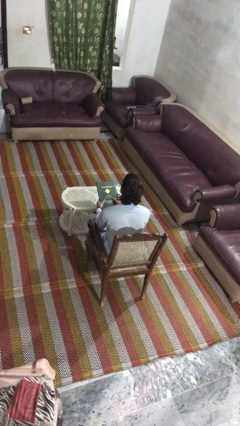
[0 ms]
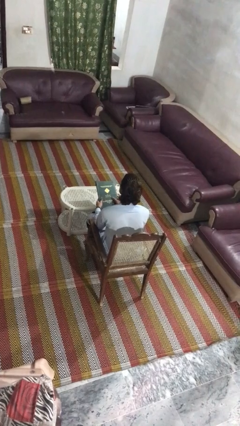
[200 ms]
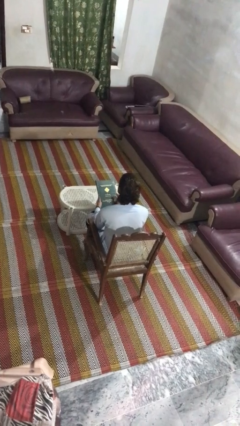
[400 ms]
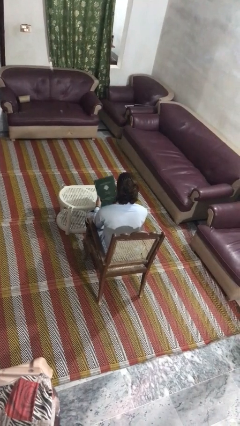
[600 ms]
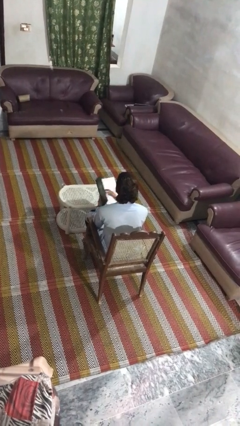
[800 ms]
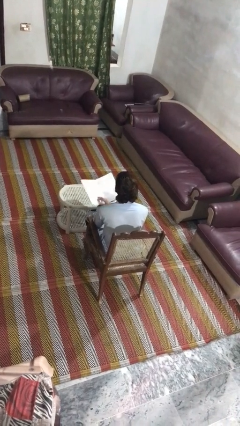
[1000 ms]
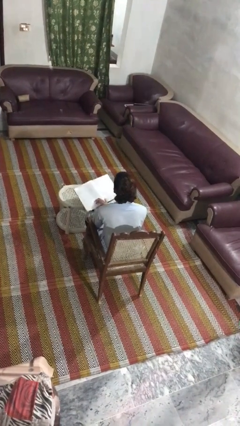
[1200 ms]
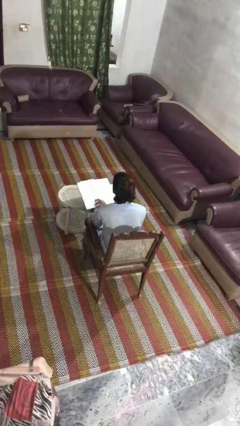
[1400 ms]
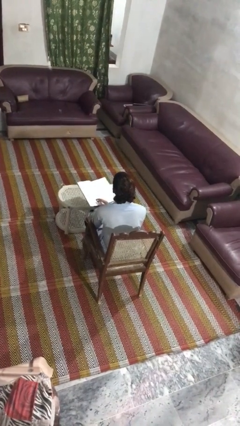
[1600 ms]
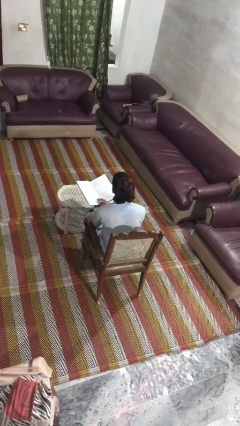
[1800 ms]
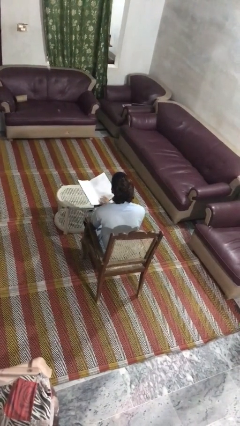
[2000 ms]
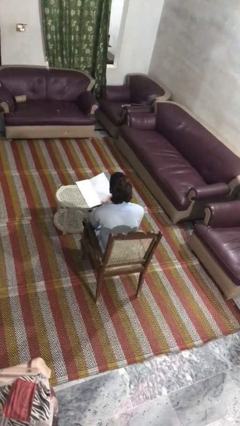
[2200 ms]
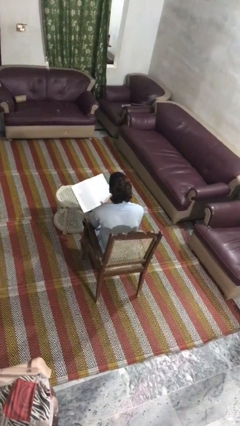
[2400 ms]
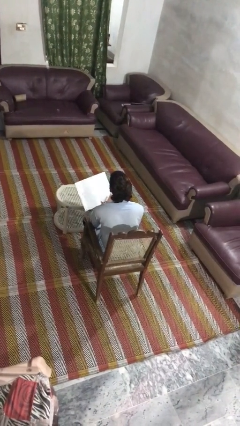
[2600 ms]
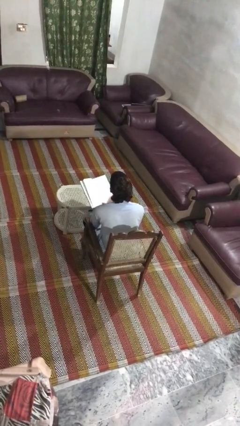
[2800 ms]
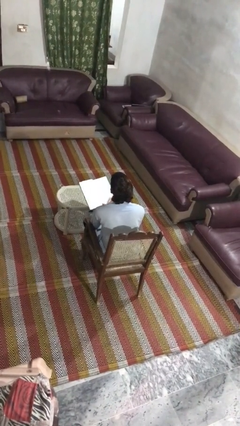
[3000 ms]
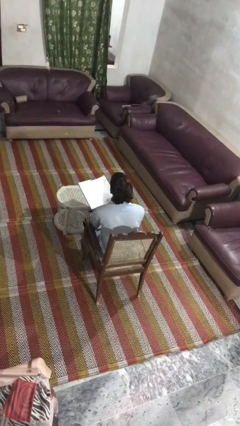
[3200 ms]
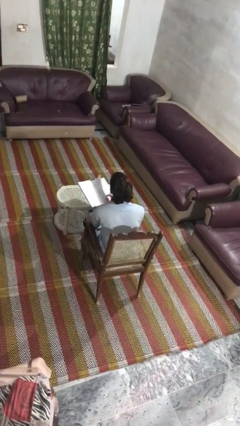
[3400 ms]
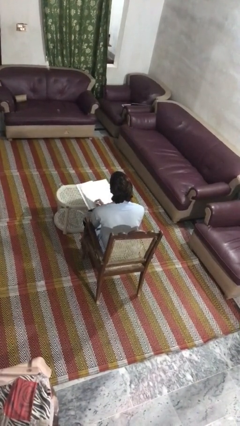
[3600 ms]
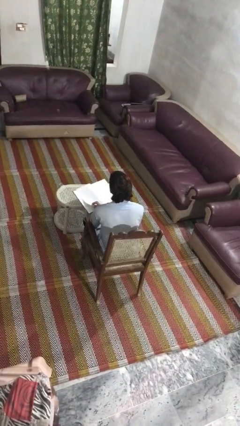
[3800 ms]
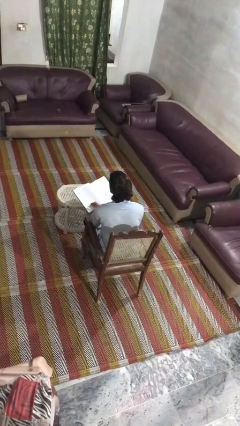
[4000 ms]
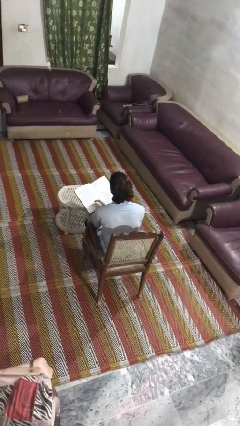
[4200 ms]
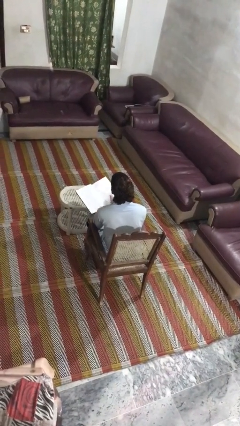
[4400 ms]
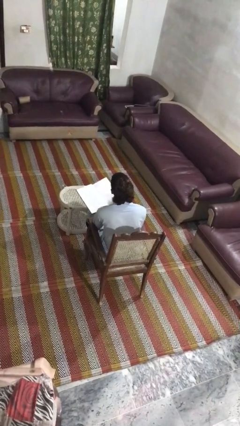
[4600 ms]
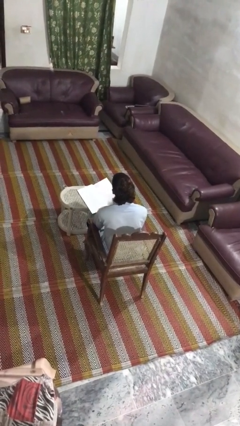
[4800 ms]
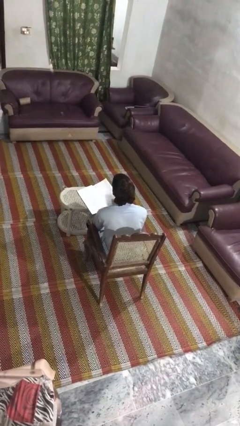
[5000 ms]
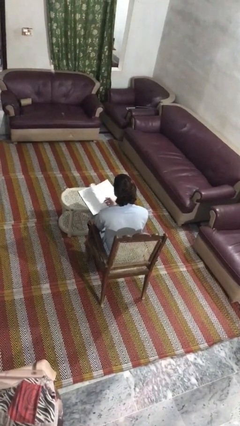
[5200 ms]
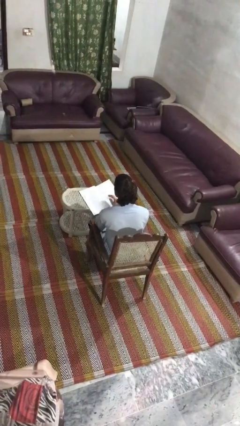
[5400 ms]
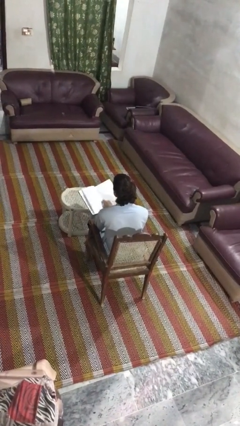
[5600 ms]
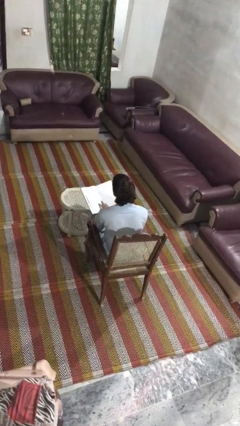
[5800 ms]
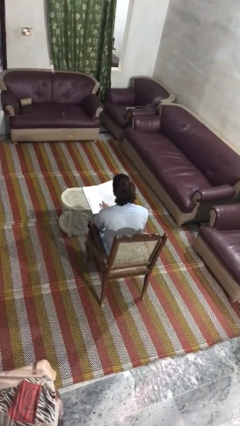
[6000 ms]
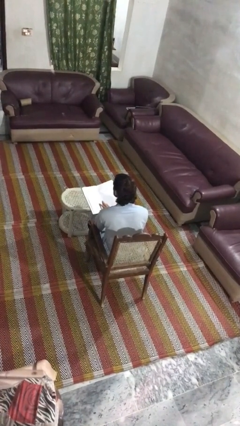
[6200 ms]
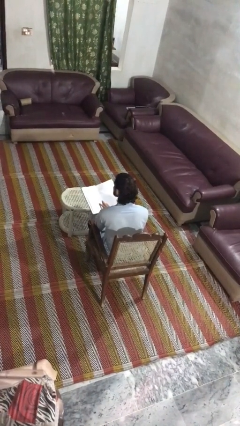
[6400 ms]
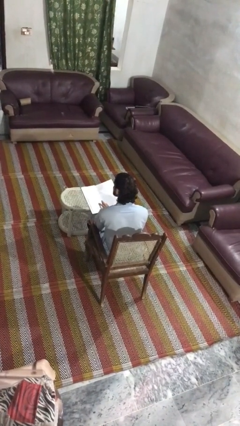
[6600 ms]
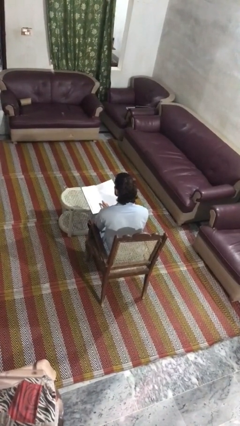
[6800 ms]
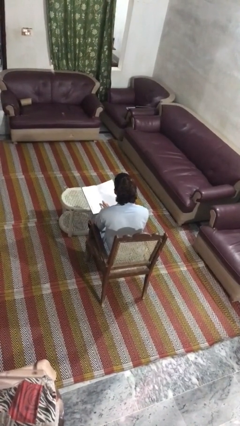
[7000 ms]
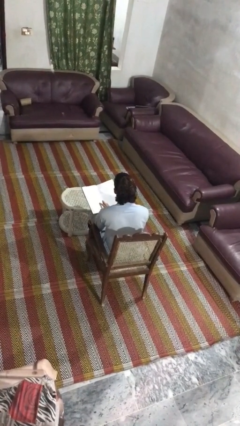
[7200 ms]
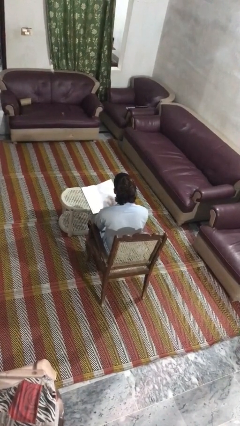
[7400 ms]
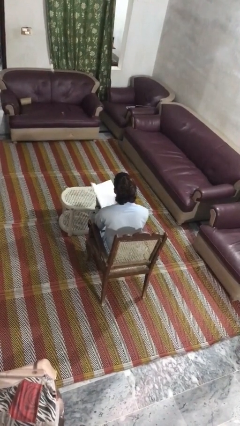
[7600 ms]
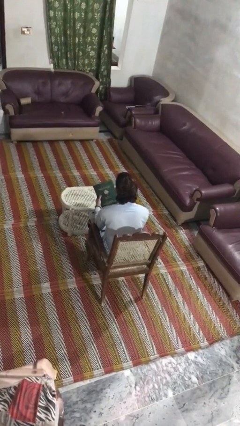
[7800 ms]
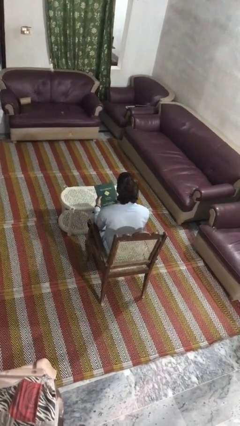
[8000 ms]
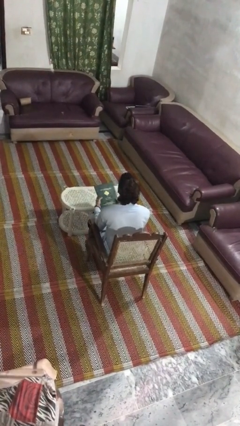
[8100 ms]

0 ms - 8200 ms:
person reads book

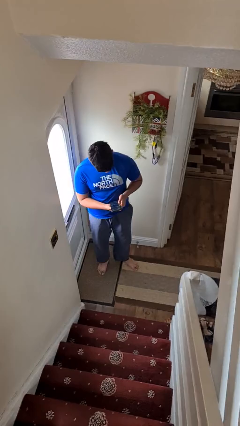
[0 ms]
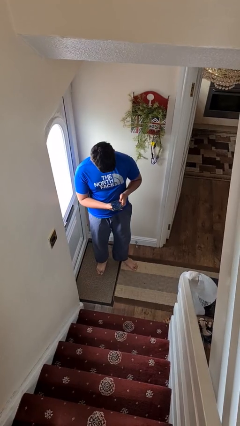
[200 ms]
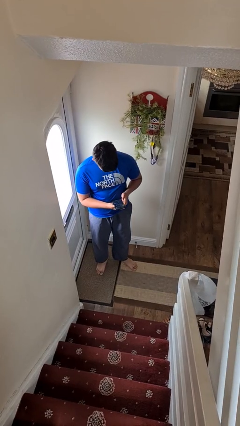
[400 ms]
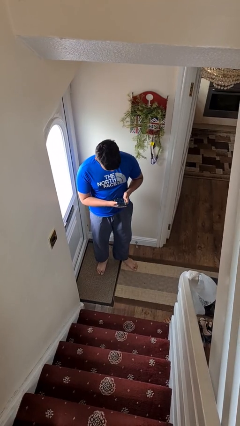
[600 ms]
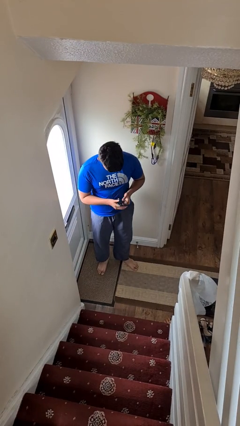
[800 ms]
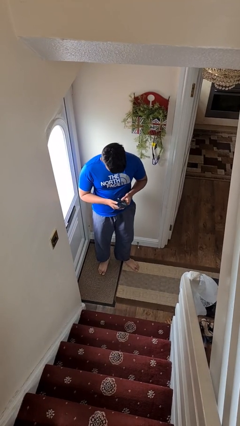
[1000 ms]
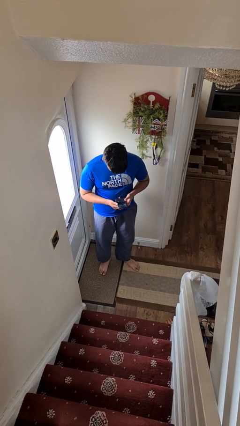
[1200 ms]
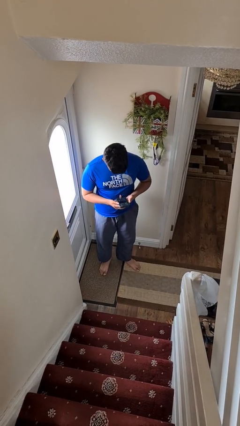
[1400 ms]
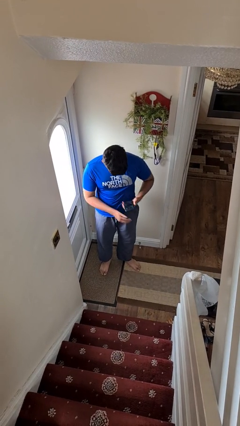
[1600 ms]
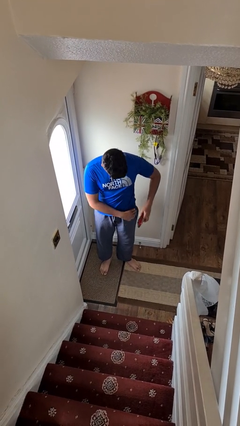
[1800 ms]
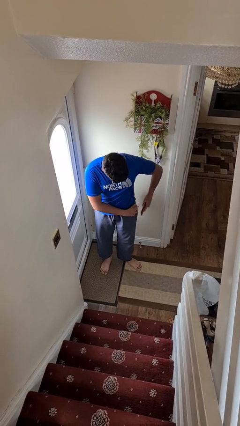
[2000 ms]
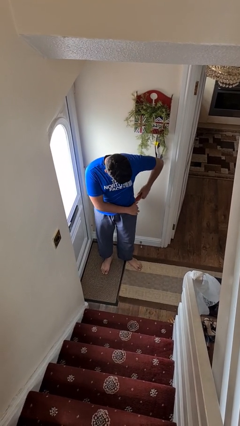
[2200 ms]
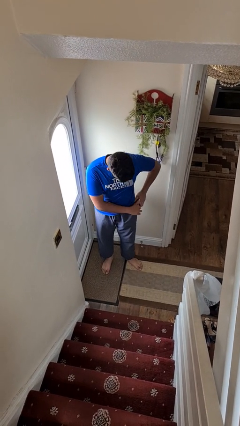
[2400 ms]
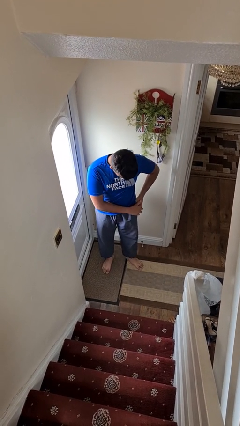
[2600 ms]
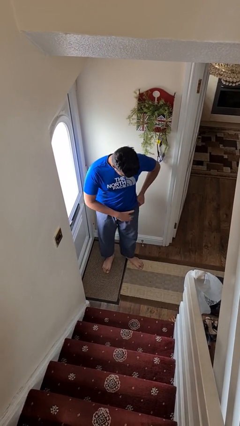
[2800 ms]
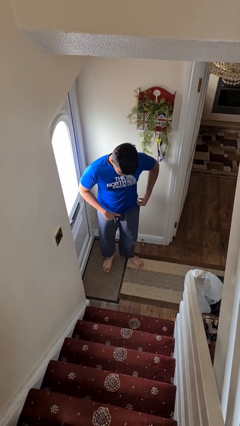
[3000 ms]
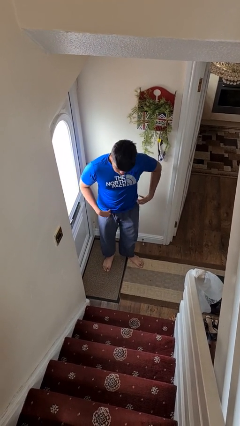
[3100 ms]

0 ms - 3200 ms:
person puts phone into pocket

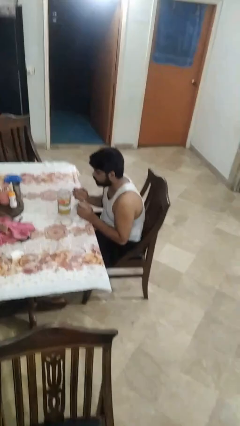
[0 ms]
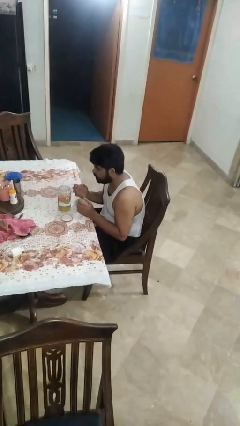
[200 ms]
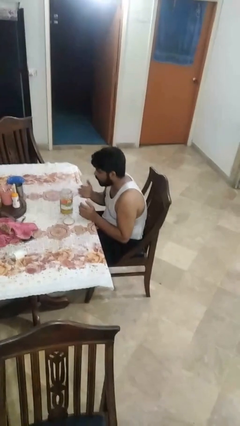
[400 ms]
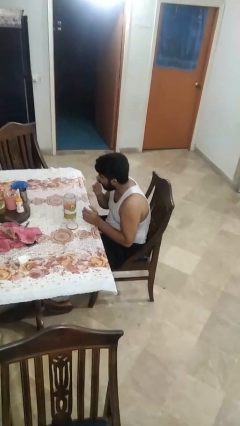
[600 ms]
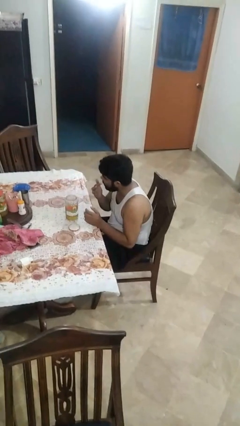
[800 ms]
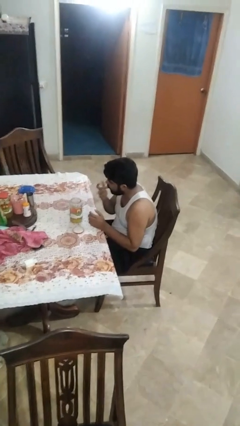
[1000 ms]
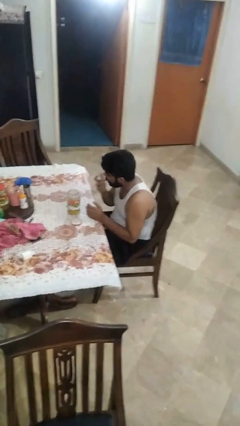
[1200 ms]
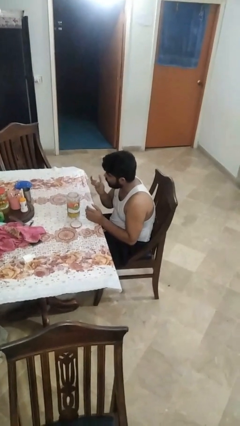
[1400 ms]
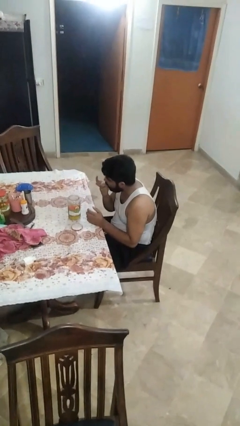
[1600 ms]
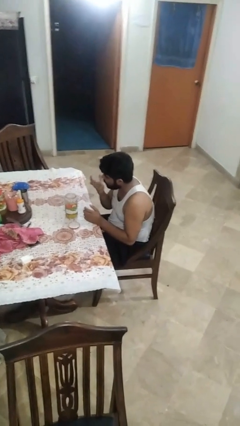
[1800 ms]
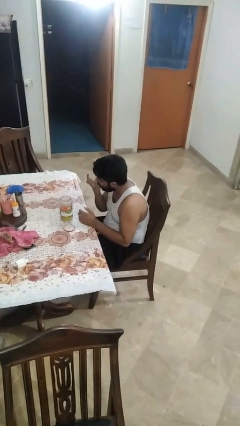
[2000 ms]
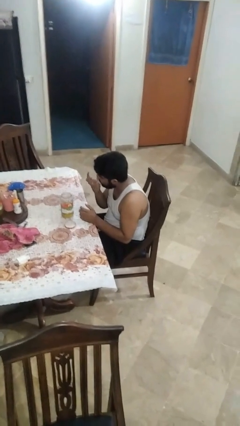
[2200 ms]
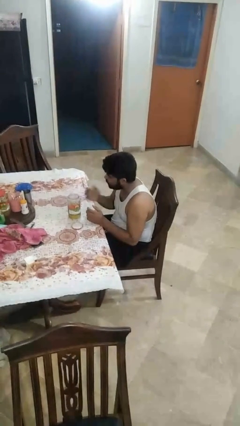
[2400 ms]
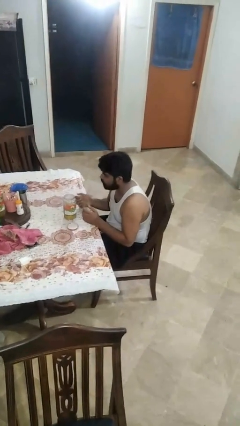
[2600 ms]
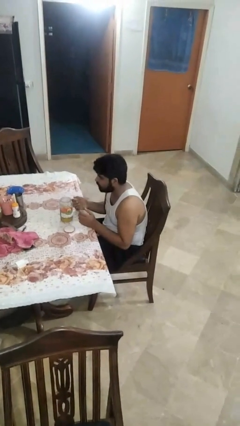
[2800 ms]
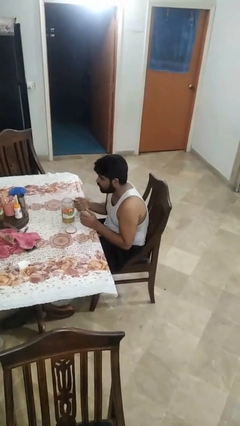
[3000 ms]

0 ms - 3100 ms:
person licks fingers

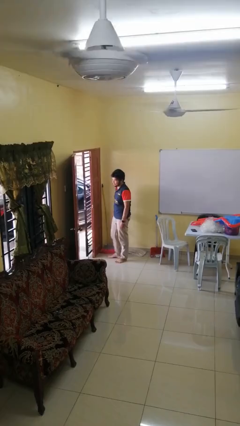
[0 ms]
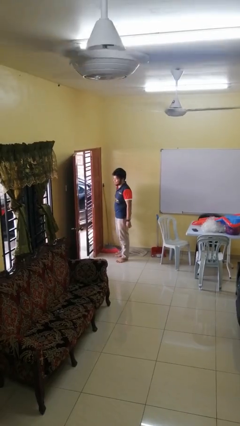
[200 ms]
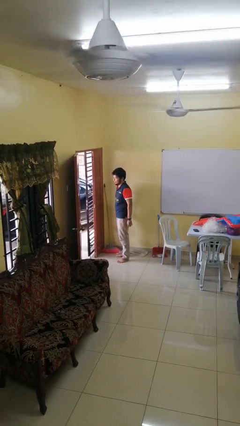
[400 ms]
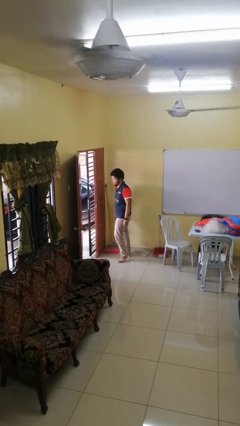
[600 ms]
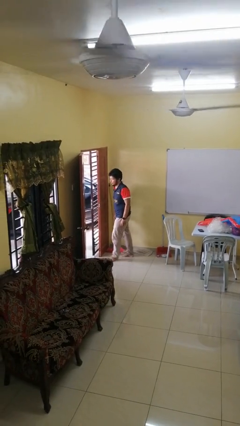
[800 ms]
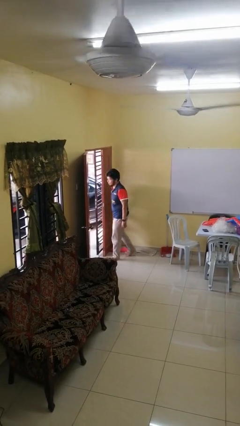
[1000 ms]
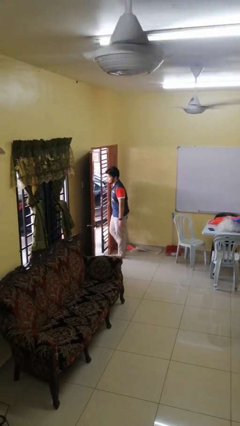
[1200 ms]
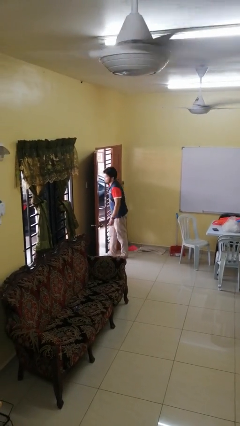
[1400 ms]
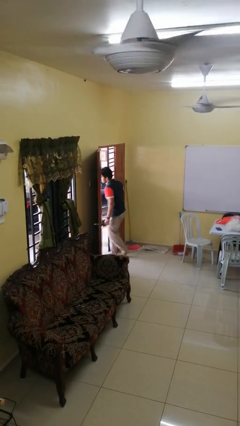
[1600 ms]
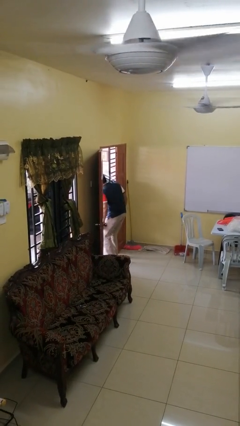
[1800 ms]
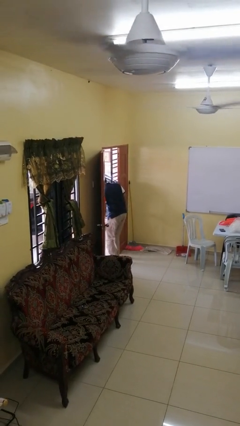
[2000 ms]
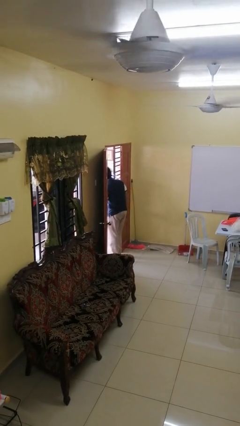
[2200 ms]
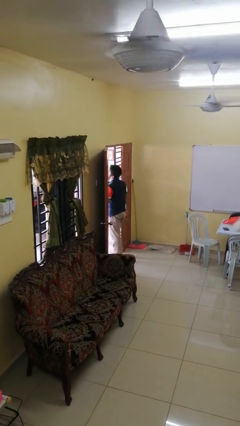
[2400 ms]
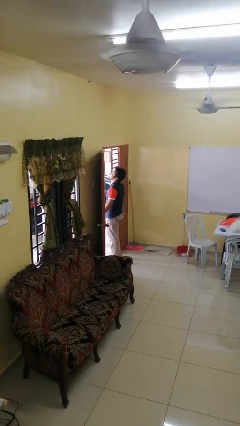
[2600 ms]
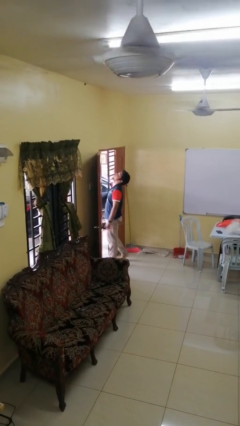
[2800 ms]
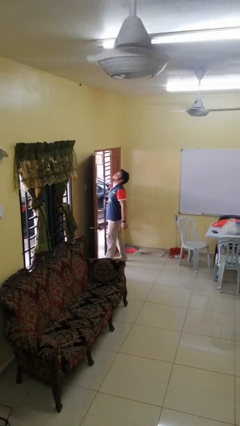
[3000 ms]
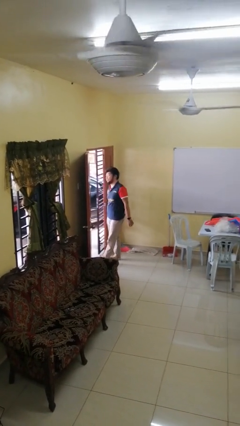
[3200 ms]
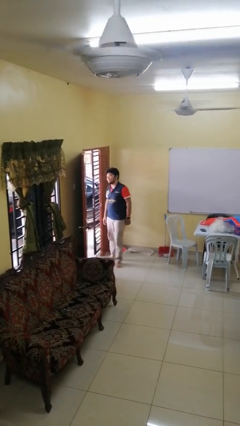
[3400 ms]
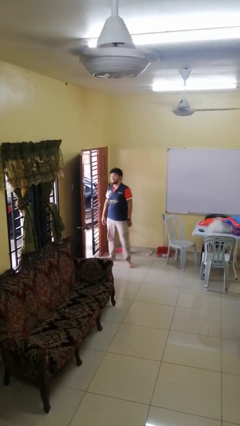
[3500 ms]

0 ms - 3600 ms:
person bumps into wall

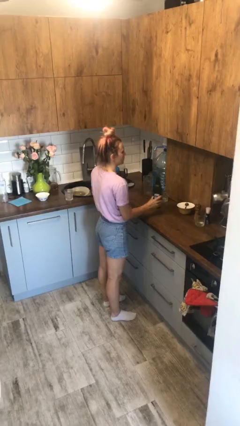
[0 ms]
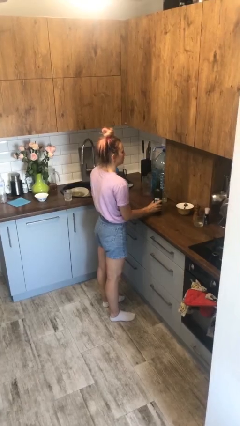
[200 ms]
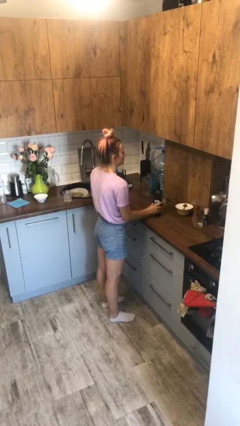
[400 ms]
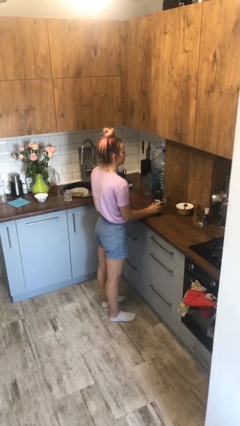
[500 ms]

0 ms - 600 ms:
person puts down object on countertop
